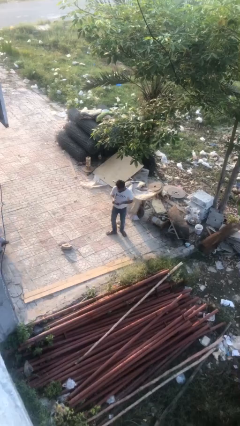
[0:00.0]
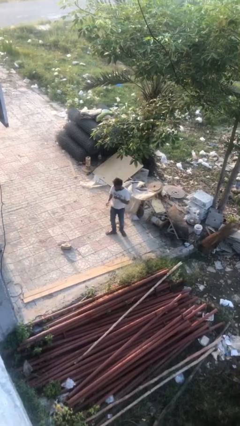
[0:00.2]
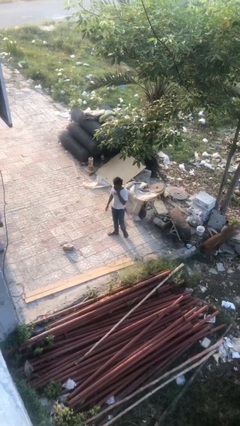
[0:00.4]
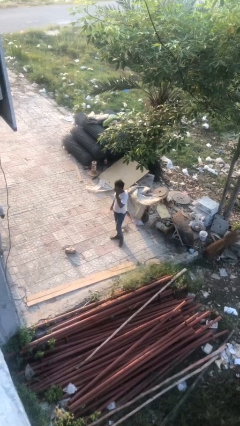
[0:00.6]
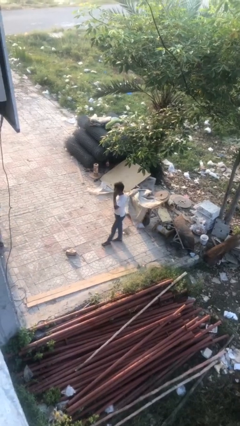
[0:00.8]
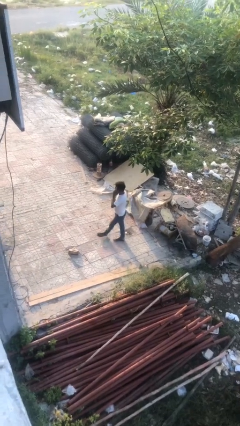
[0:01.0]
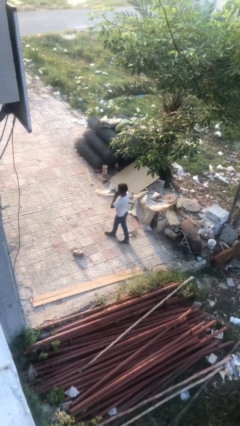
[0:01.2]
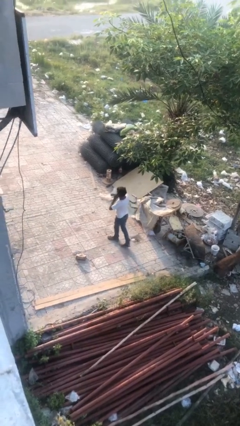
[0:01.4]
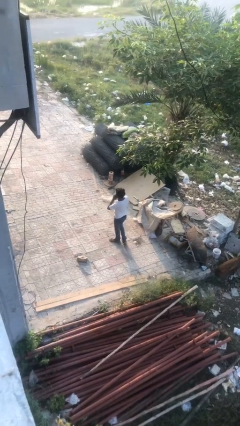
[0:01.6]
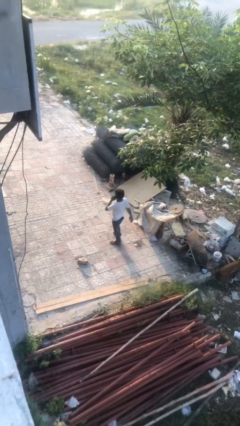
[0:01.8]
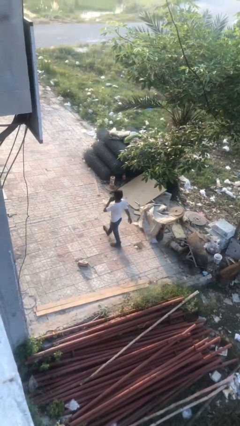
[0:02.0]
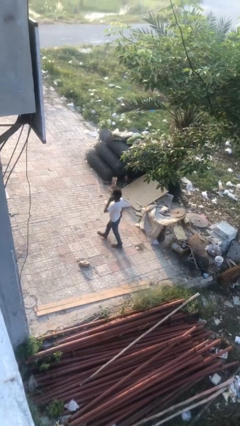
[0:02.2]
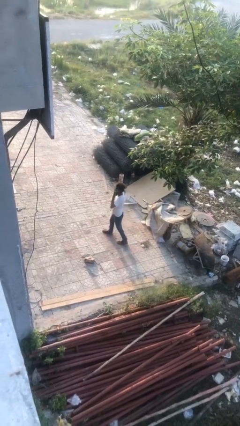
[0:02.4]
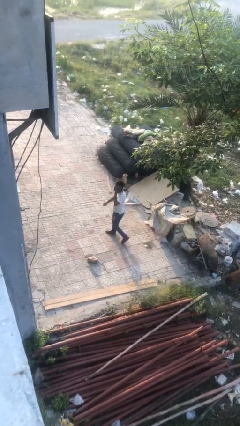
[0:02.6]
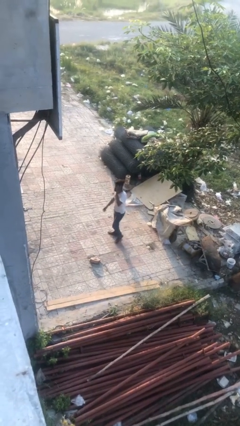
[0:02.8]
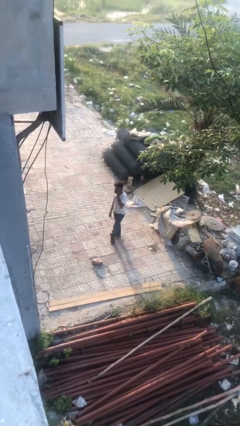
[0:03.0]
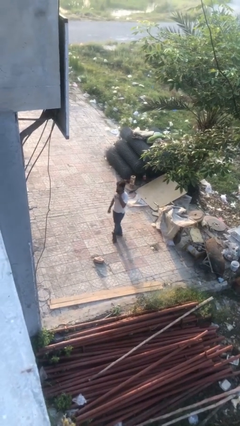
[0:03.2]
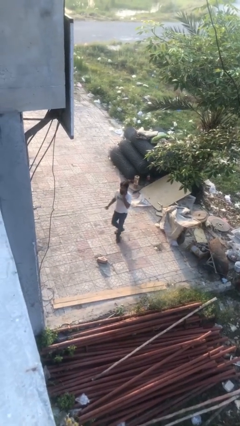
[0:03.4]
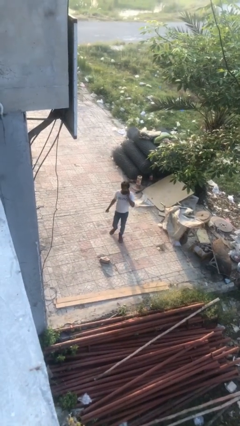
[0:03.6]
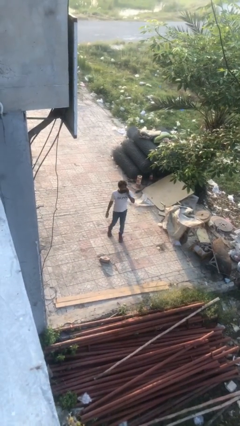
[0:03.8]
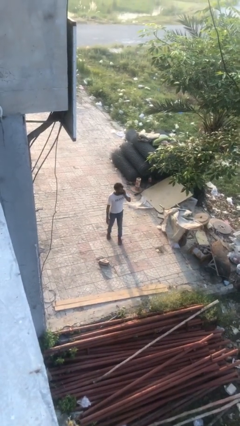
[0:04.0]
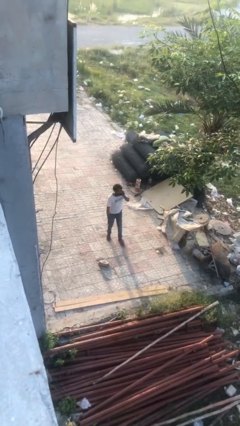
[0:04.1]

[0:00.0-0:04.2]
person talks on phone

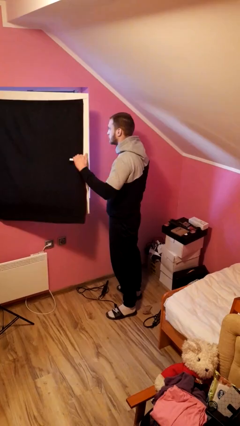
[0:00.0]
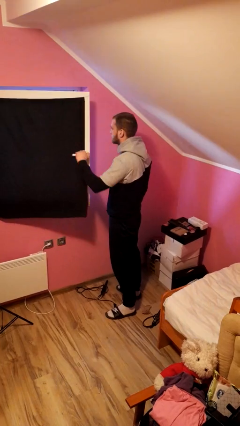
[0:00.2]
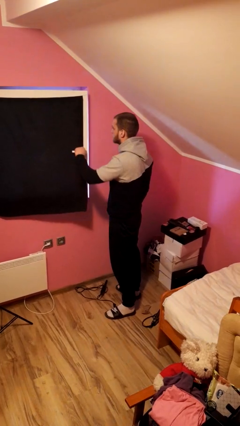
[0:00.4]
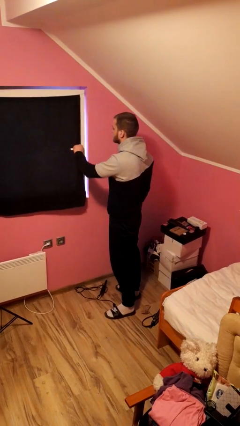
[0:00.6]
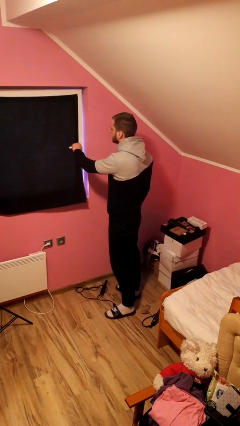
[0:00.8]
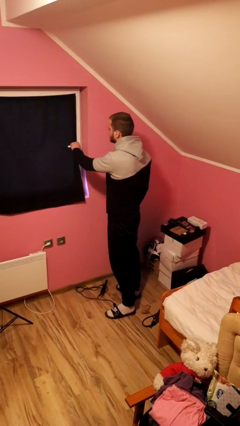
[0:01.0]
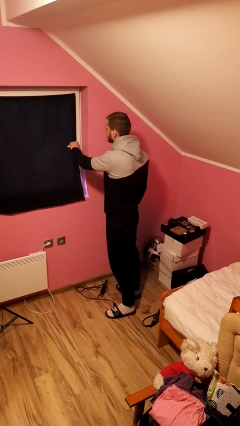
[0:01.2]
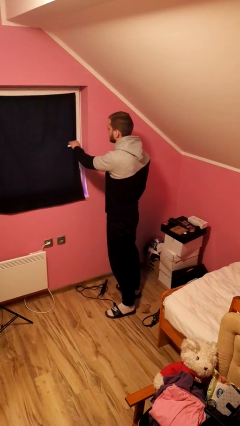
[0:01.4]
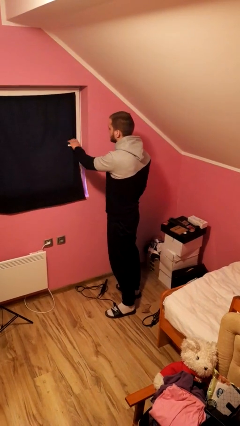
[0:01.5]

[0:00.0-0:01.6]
person closes home window

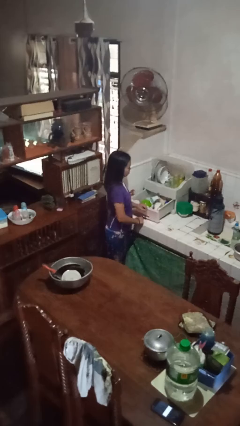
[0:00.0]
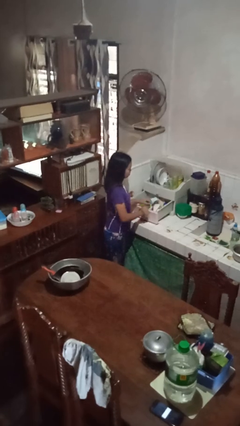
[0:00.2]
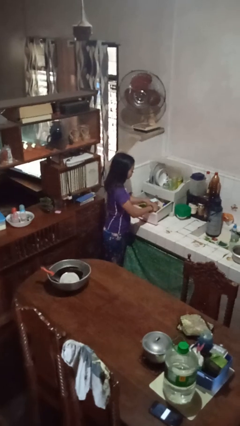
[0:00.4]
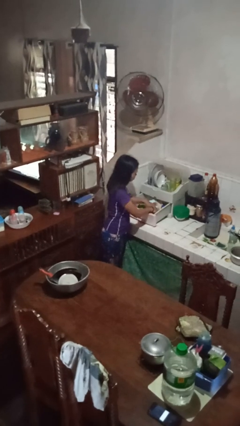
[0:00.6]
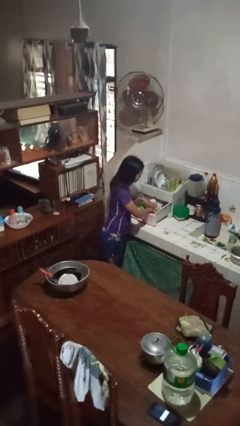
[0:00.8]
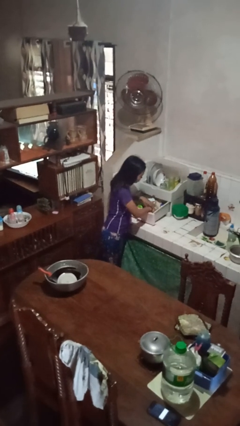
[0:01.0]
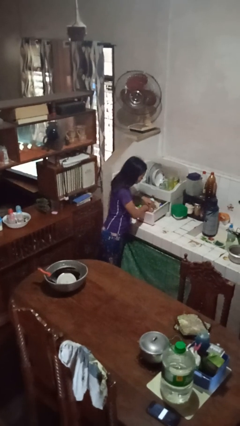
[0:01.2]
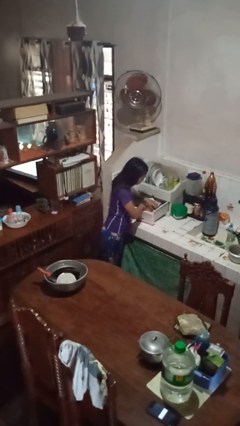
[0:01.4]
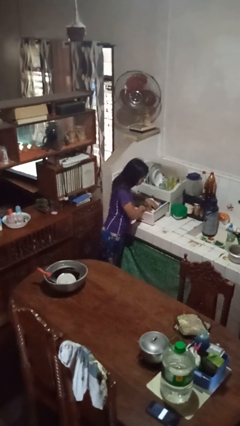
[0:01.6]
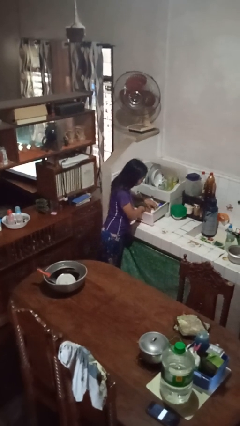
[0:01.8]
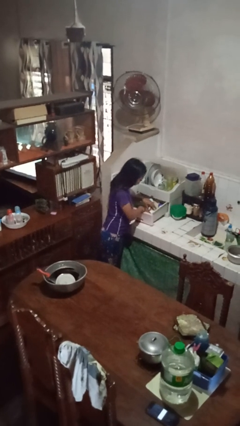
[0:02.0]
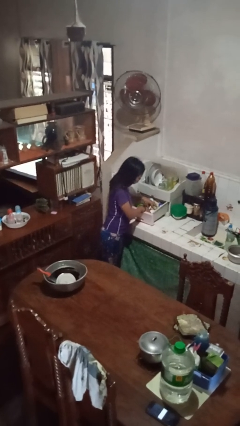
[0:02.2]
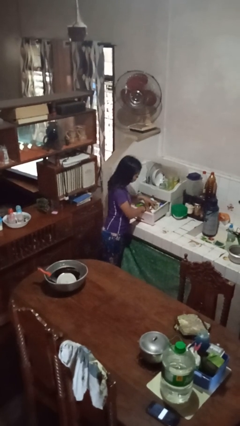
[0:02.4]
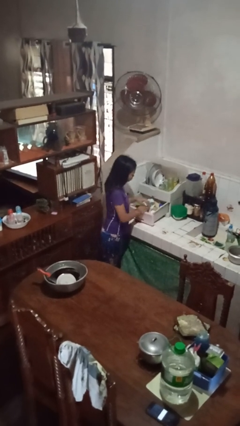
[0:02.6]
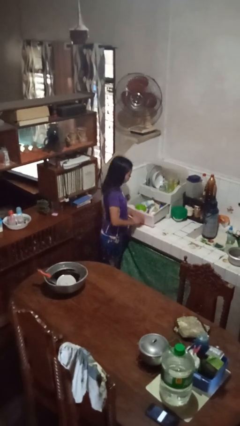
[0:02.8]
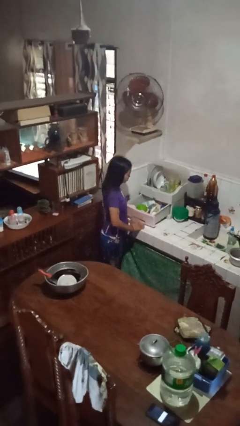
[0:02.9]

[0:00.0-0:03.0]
person searches in kitchen drawer

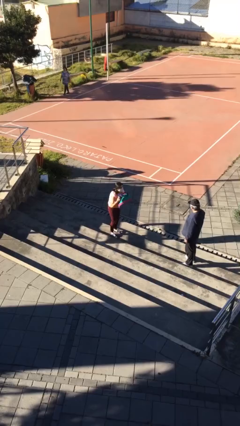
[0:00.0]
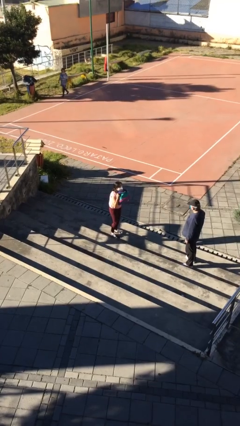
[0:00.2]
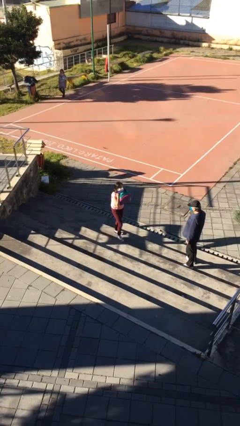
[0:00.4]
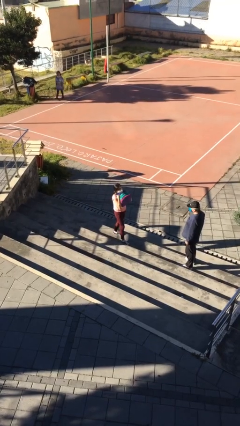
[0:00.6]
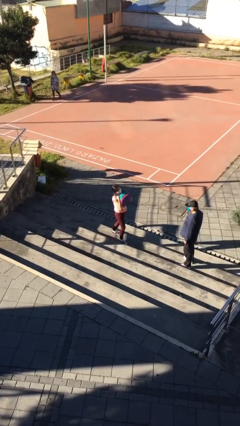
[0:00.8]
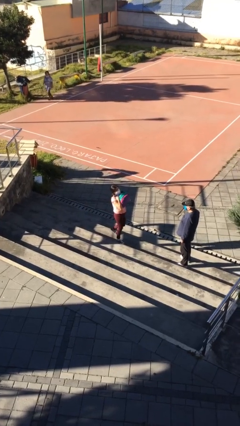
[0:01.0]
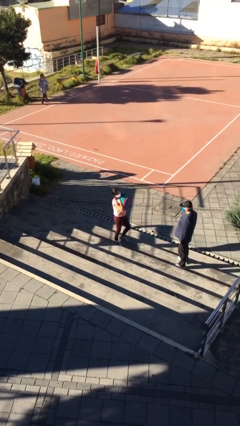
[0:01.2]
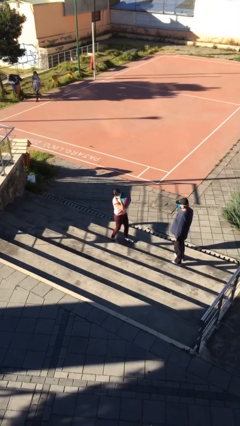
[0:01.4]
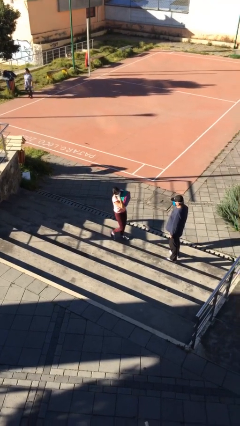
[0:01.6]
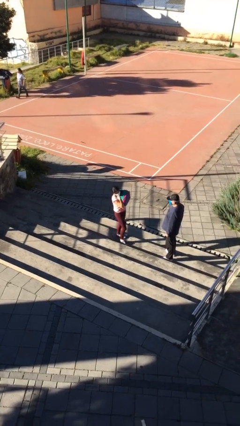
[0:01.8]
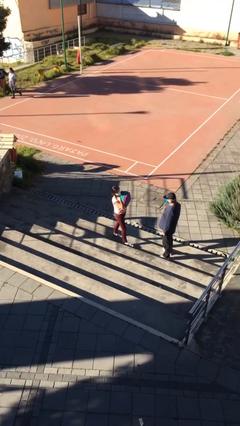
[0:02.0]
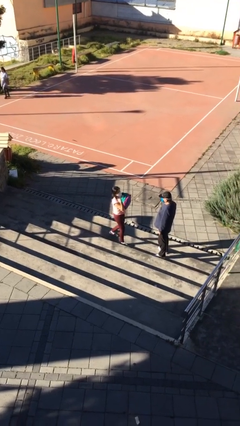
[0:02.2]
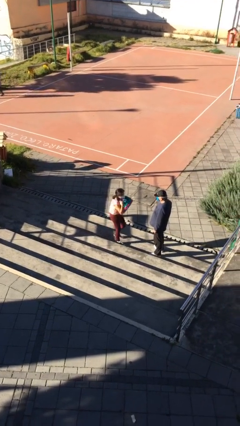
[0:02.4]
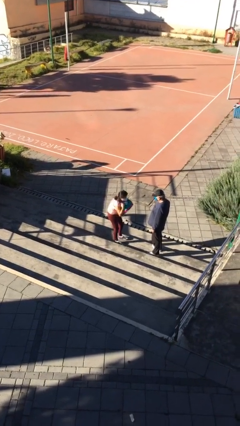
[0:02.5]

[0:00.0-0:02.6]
person carries heavy object

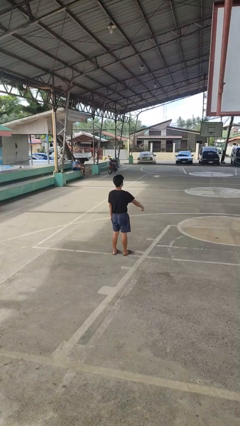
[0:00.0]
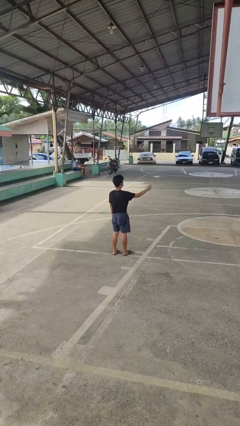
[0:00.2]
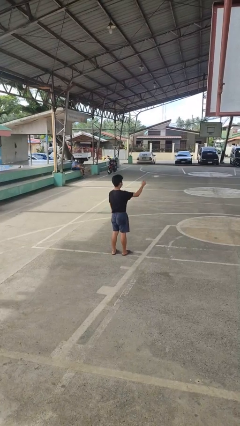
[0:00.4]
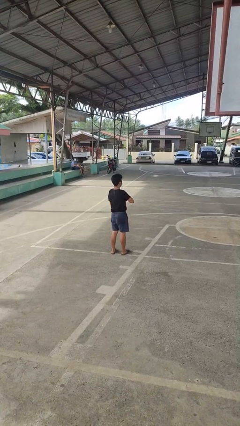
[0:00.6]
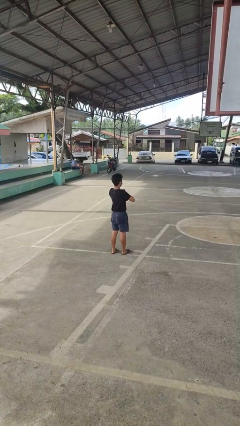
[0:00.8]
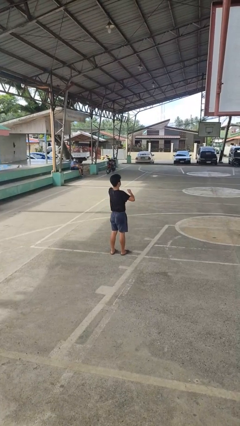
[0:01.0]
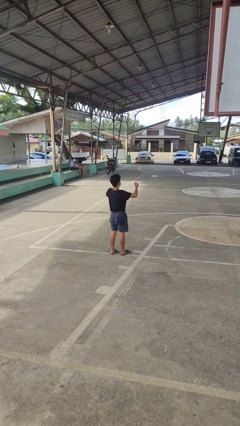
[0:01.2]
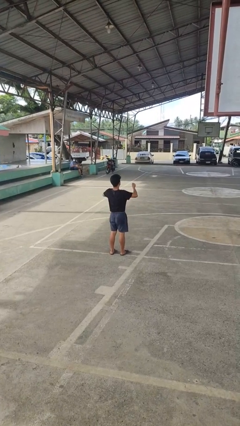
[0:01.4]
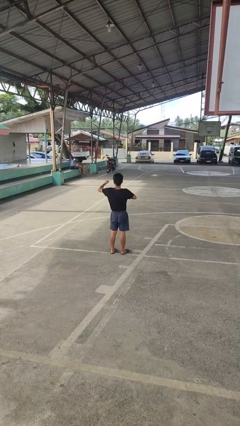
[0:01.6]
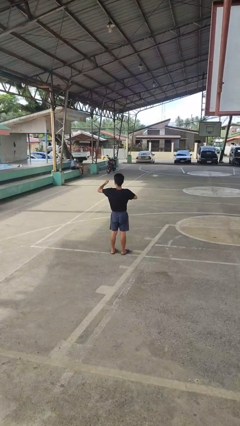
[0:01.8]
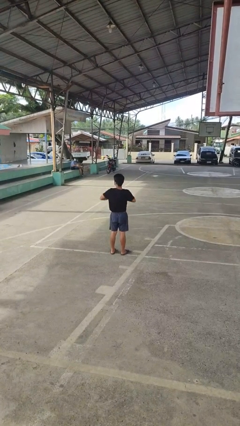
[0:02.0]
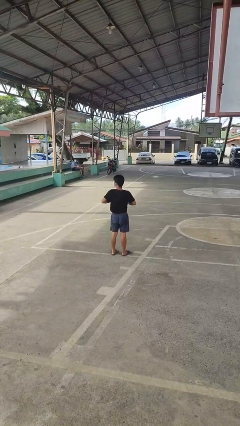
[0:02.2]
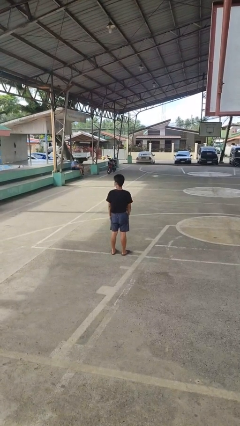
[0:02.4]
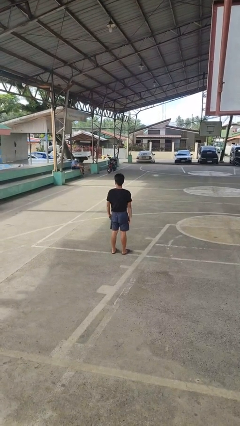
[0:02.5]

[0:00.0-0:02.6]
person drums on chest

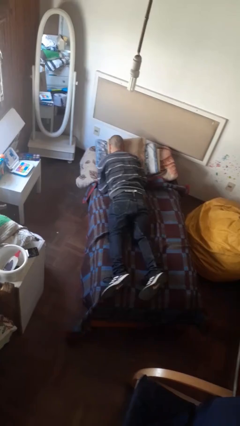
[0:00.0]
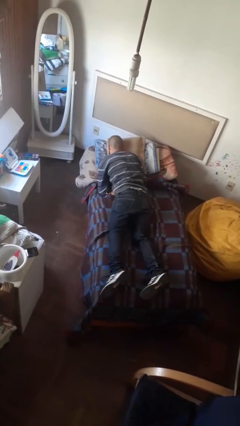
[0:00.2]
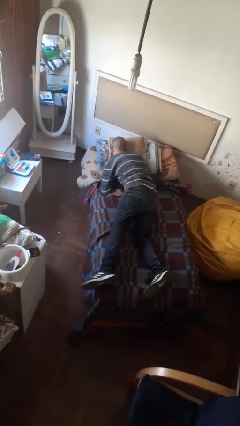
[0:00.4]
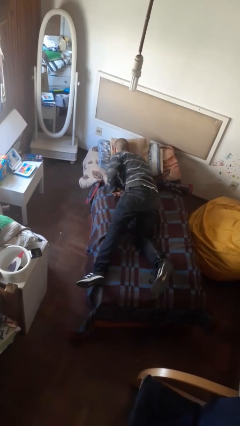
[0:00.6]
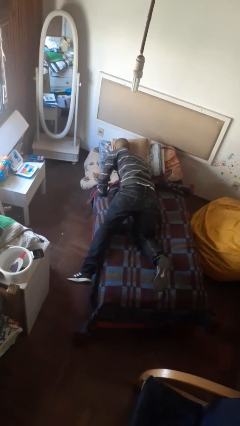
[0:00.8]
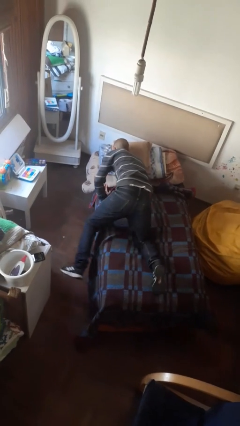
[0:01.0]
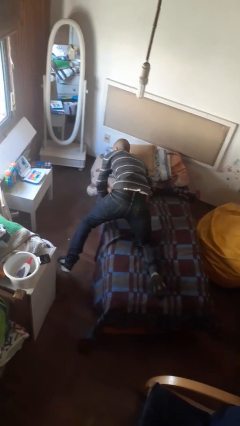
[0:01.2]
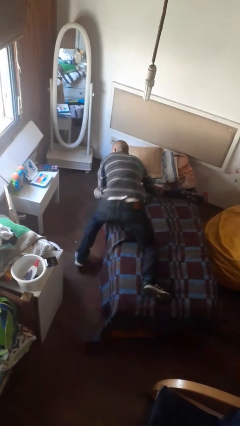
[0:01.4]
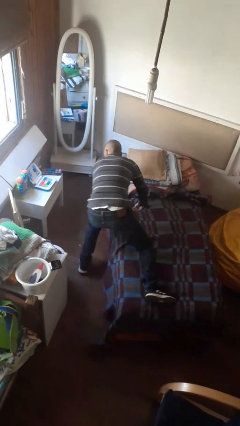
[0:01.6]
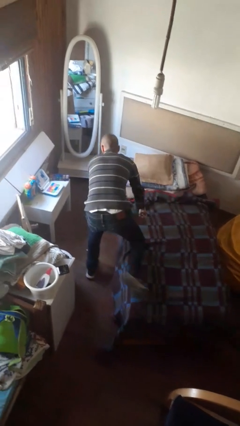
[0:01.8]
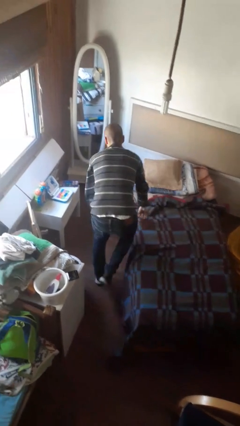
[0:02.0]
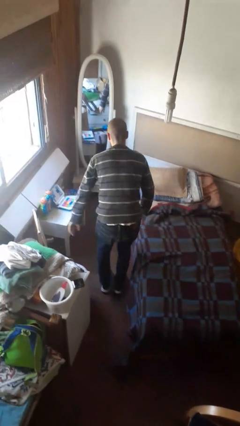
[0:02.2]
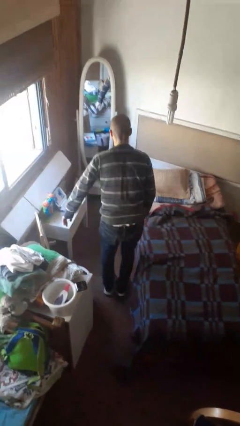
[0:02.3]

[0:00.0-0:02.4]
person stands up

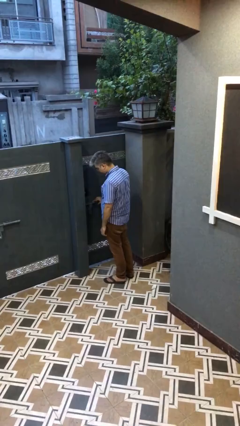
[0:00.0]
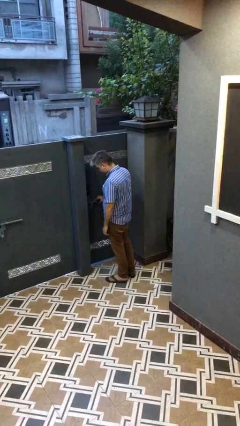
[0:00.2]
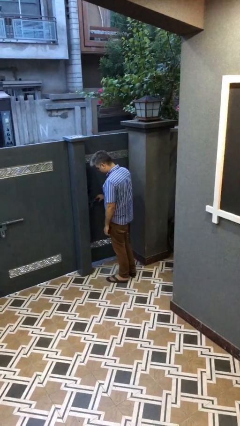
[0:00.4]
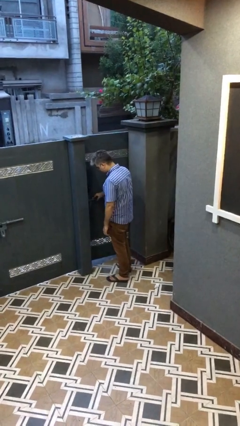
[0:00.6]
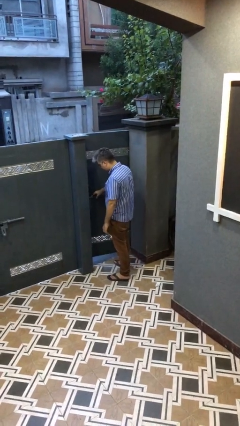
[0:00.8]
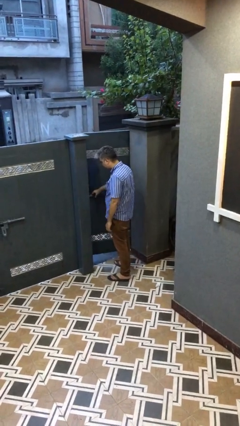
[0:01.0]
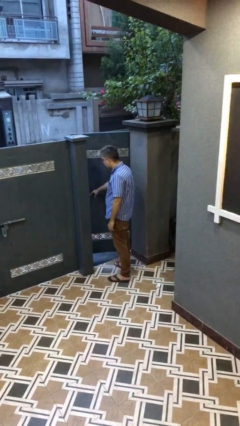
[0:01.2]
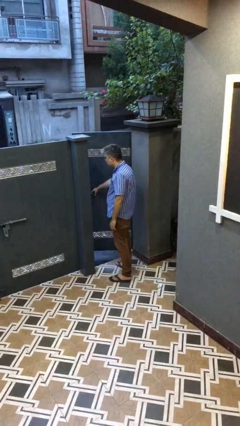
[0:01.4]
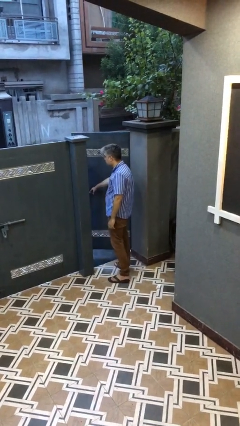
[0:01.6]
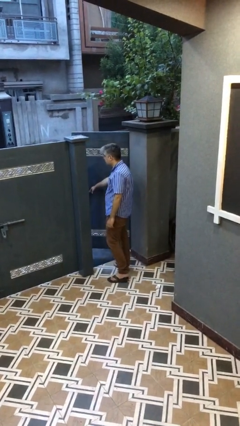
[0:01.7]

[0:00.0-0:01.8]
person opens facility door
